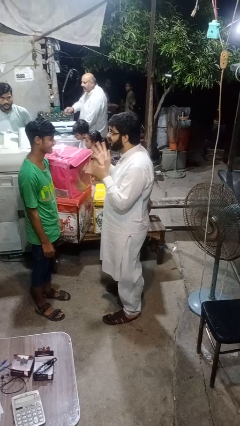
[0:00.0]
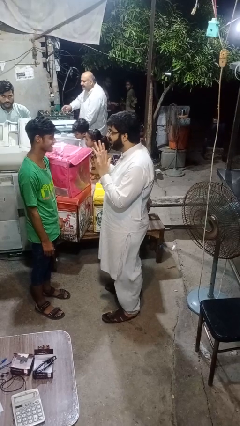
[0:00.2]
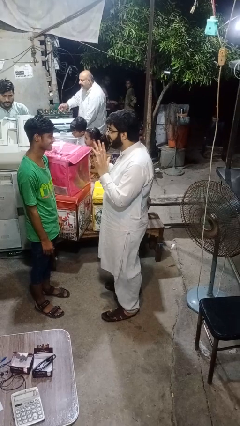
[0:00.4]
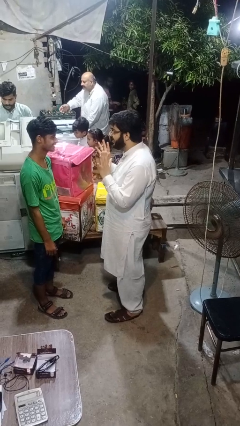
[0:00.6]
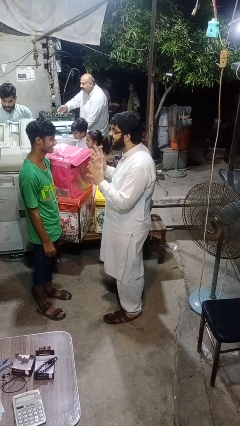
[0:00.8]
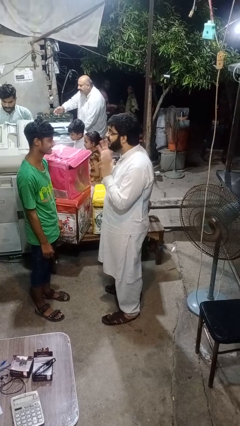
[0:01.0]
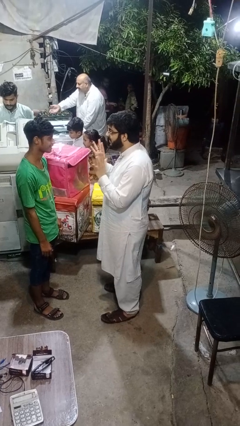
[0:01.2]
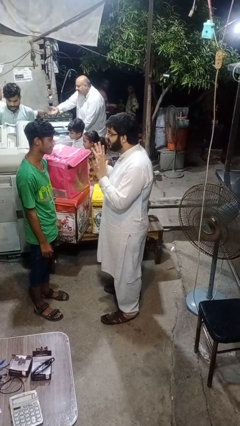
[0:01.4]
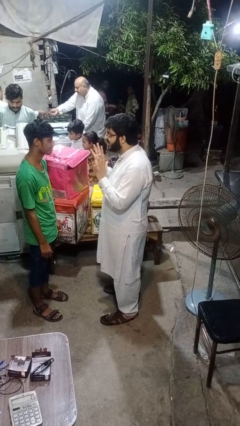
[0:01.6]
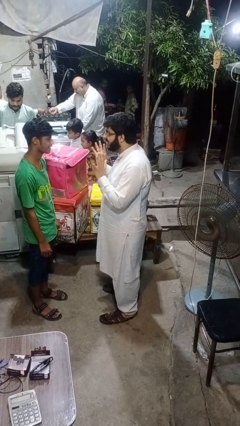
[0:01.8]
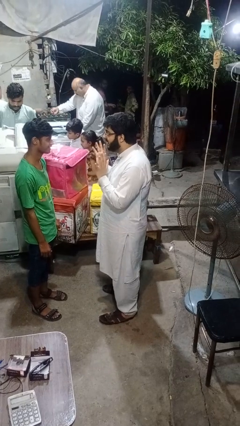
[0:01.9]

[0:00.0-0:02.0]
person talks to person

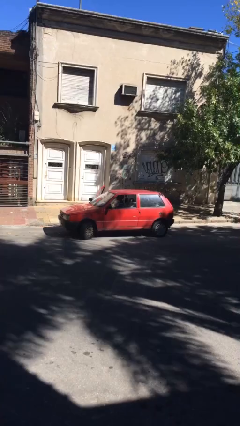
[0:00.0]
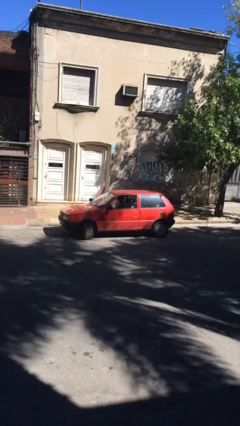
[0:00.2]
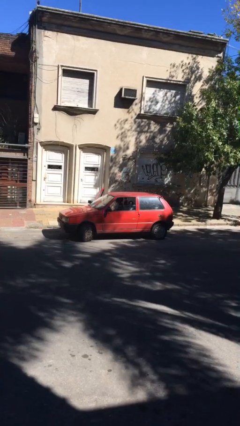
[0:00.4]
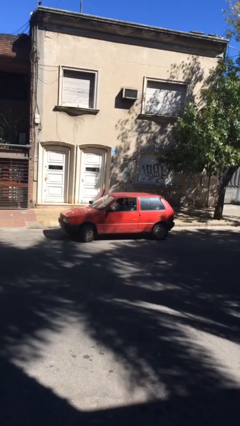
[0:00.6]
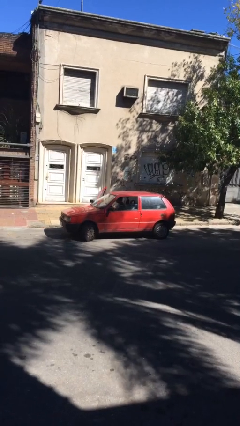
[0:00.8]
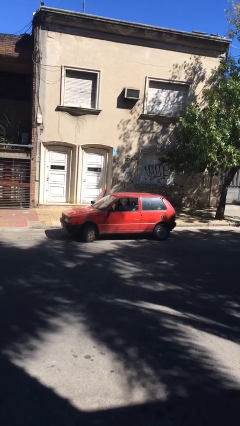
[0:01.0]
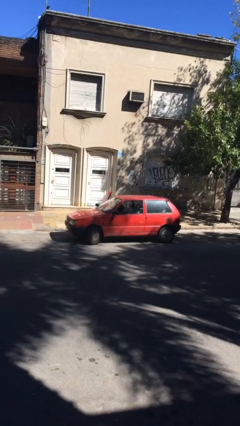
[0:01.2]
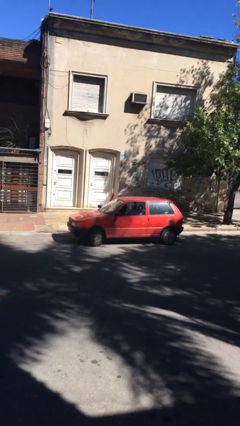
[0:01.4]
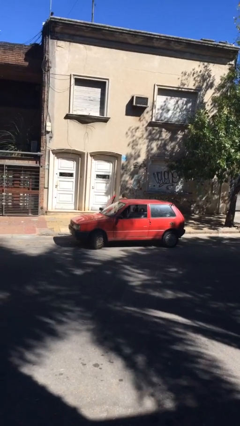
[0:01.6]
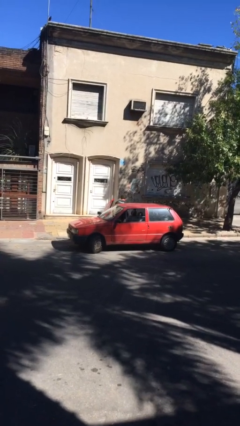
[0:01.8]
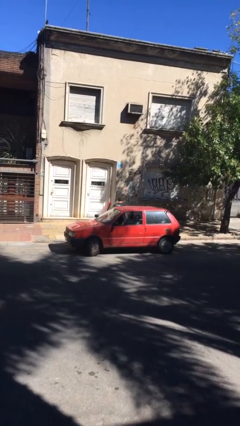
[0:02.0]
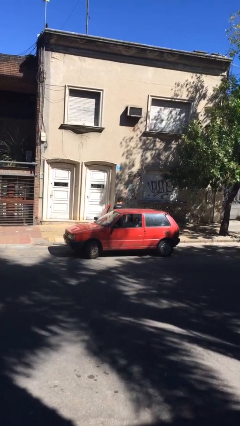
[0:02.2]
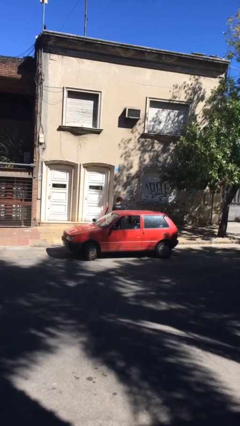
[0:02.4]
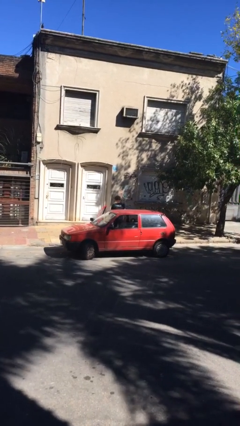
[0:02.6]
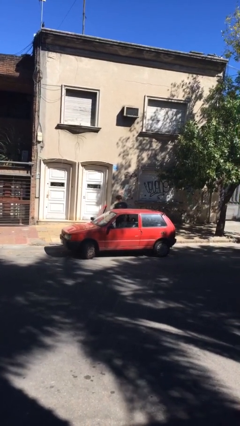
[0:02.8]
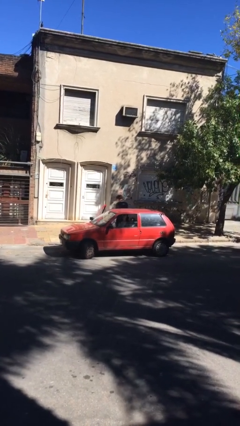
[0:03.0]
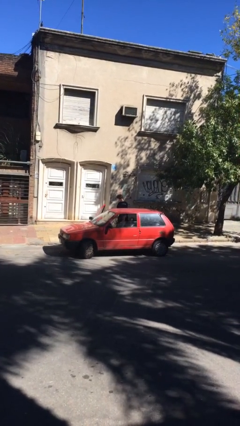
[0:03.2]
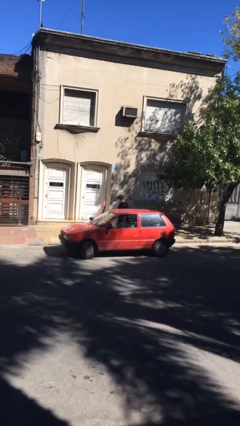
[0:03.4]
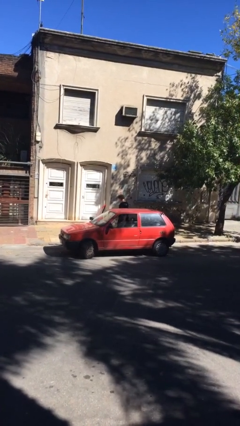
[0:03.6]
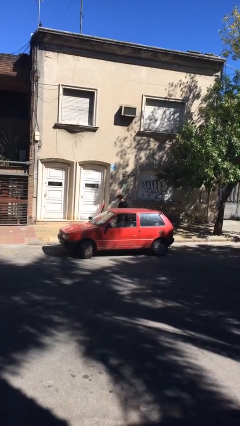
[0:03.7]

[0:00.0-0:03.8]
person exits car

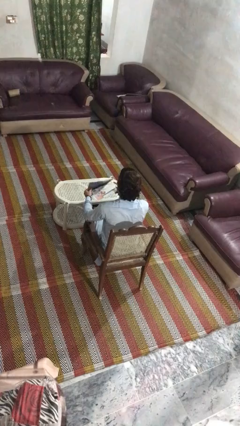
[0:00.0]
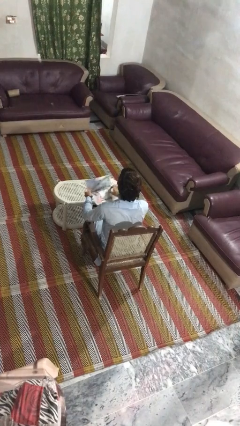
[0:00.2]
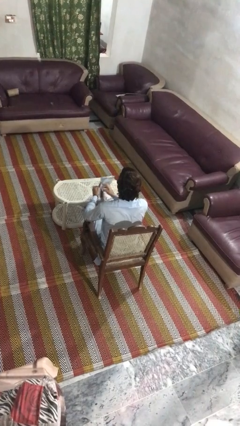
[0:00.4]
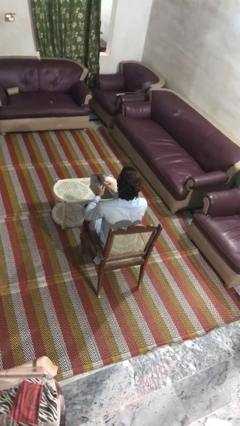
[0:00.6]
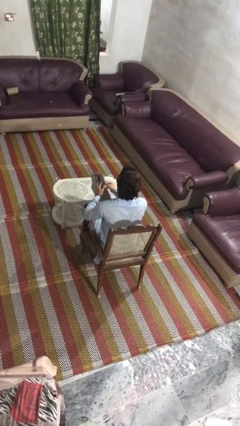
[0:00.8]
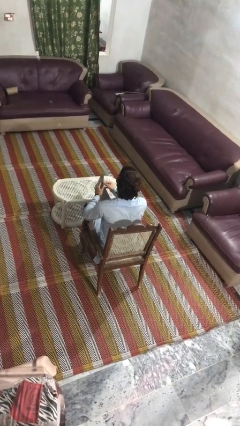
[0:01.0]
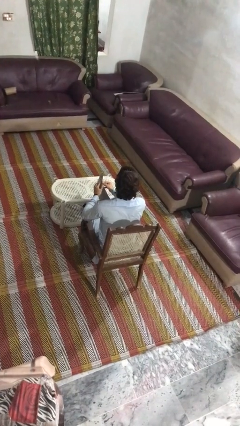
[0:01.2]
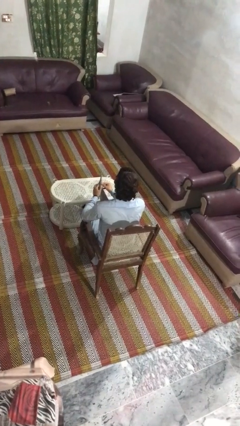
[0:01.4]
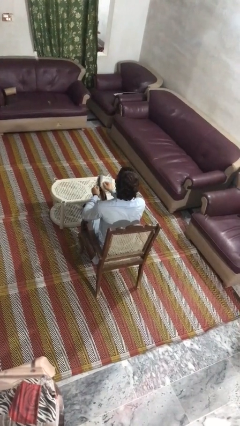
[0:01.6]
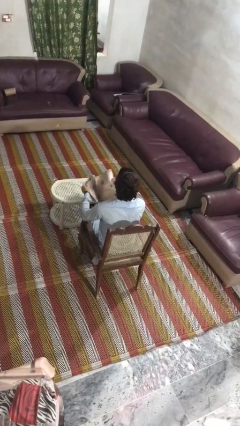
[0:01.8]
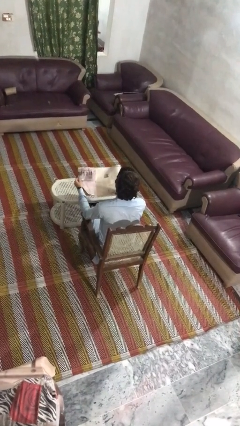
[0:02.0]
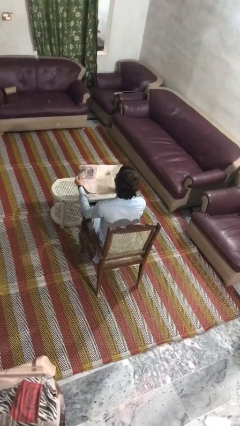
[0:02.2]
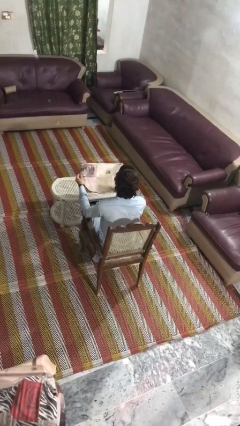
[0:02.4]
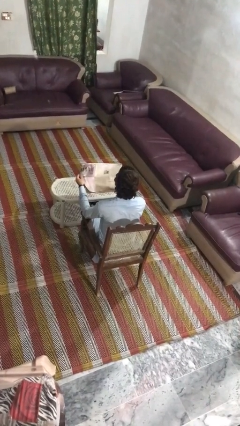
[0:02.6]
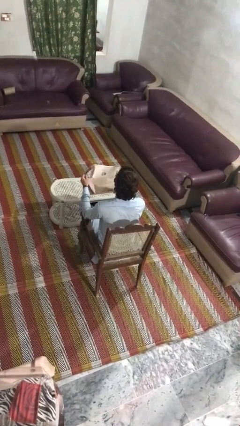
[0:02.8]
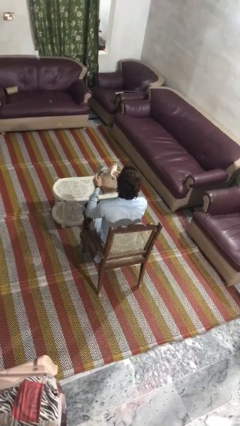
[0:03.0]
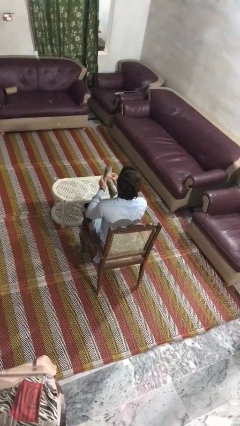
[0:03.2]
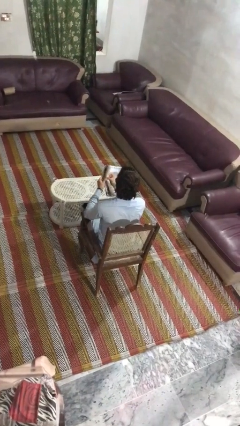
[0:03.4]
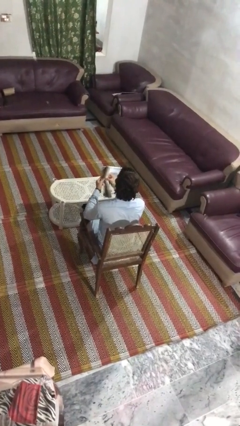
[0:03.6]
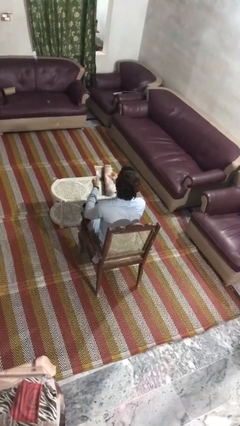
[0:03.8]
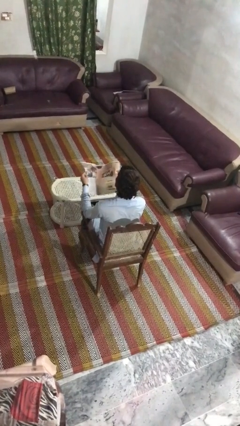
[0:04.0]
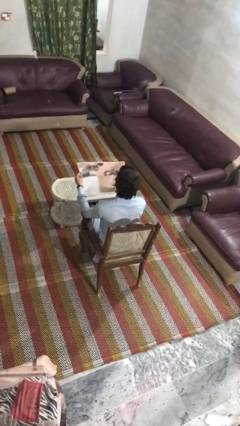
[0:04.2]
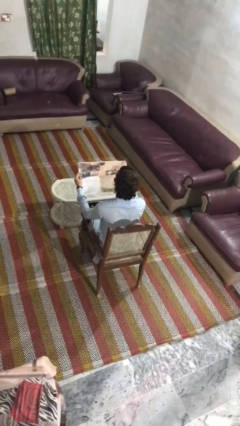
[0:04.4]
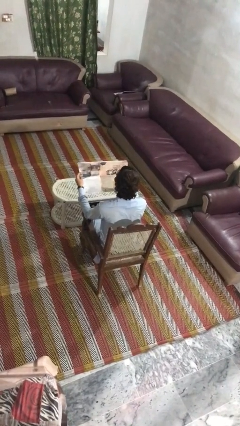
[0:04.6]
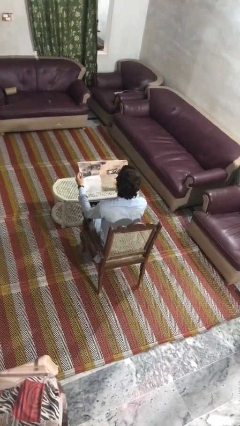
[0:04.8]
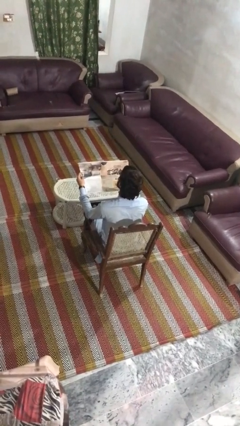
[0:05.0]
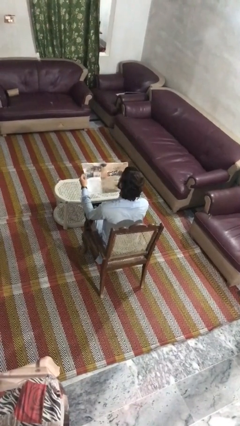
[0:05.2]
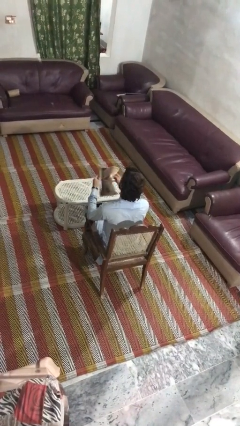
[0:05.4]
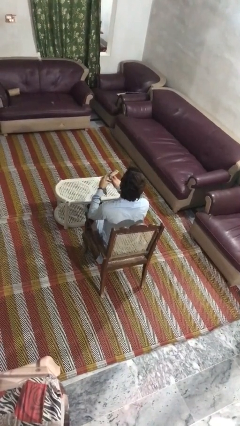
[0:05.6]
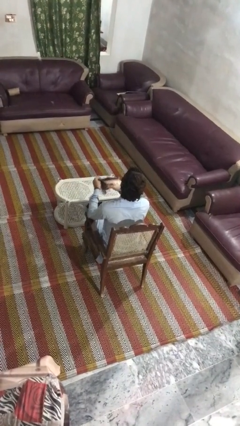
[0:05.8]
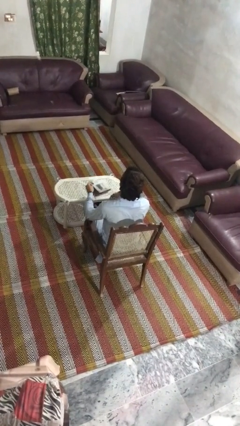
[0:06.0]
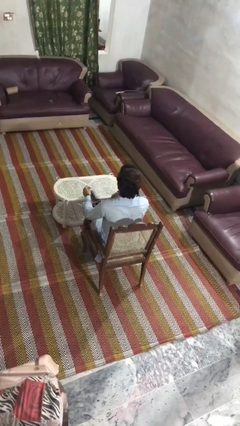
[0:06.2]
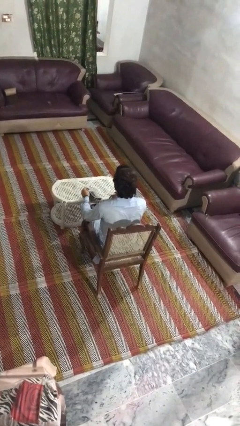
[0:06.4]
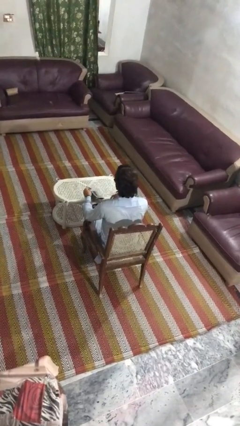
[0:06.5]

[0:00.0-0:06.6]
person reads magazine

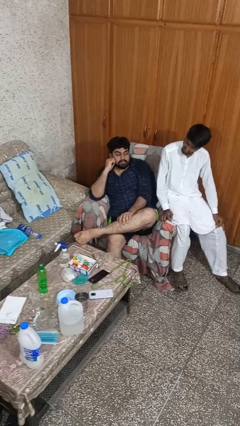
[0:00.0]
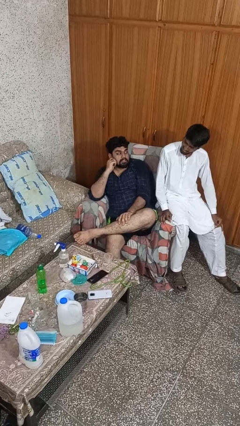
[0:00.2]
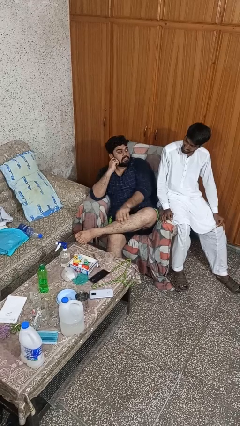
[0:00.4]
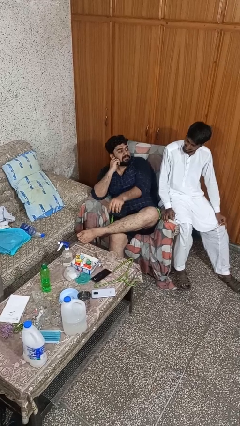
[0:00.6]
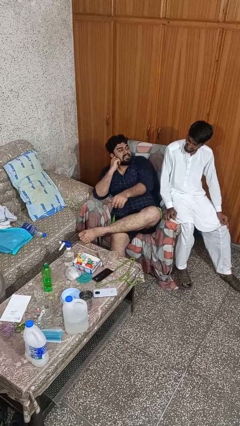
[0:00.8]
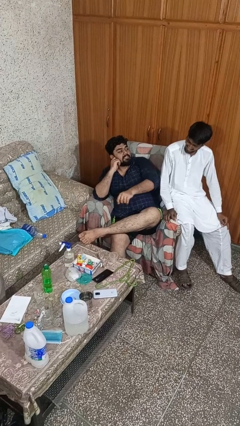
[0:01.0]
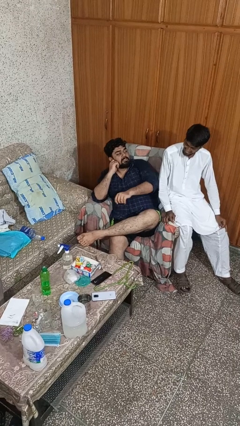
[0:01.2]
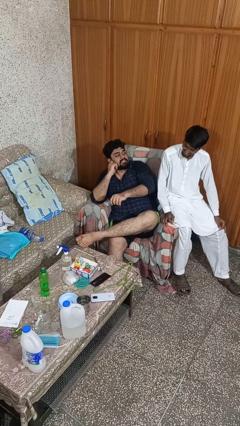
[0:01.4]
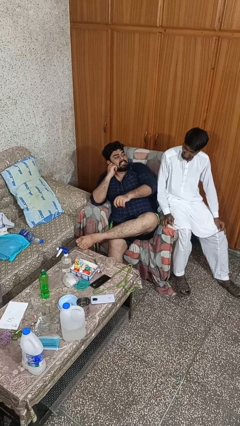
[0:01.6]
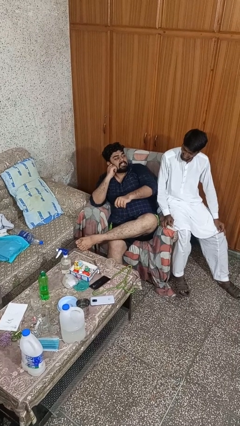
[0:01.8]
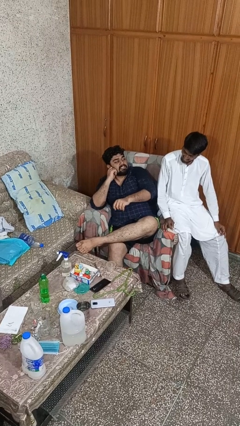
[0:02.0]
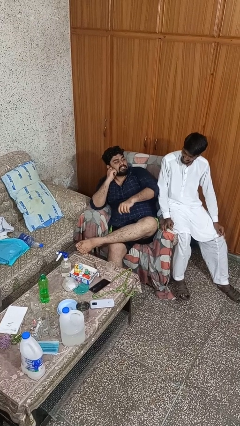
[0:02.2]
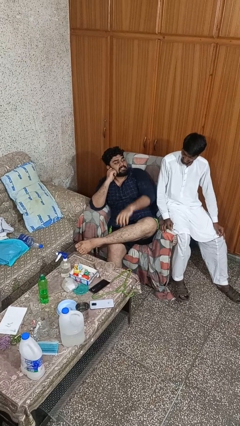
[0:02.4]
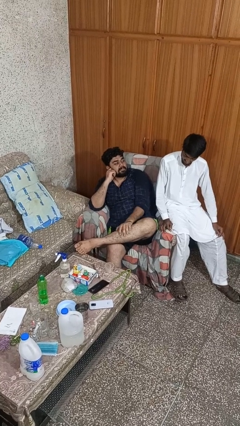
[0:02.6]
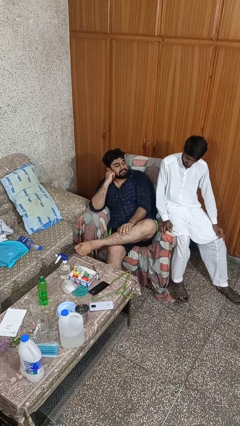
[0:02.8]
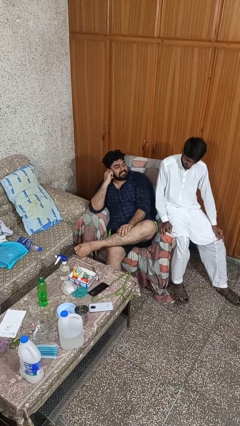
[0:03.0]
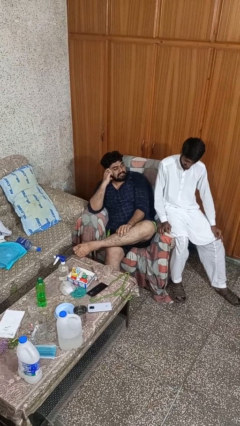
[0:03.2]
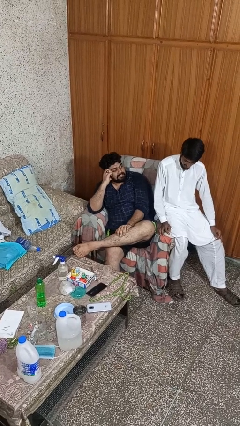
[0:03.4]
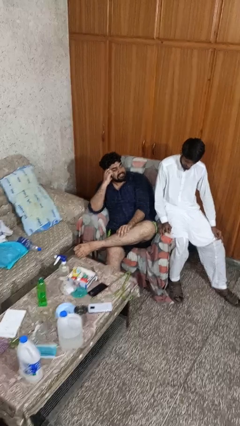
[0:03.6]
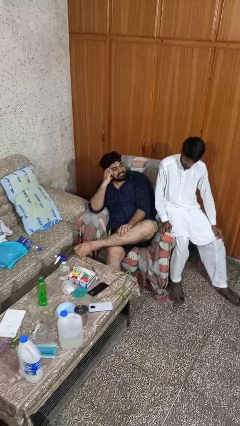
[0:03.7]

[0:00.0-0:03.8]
person nudges person with elbow

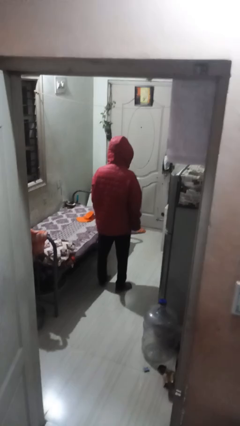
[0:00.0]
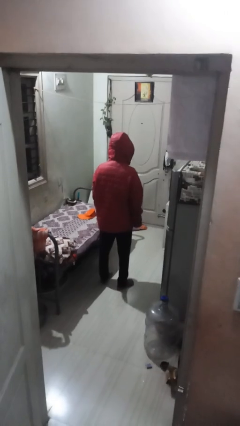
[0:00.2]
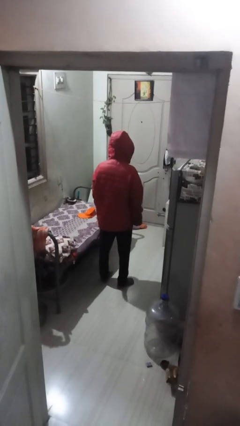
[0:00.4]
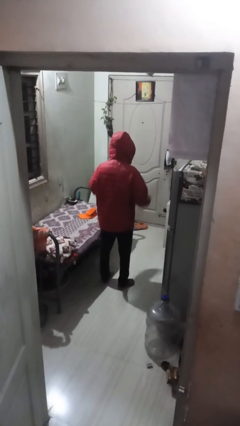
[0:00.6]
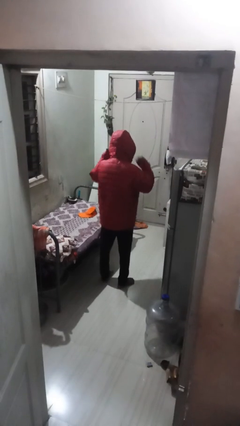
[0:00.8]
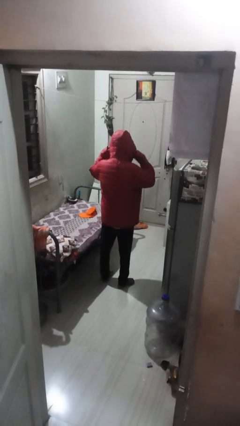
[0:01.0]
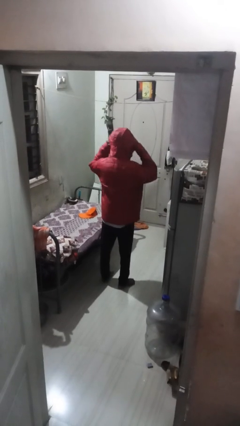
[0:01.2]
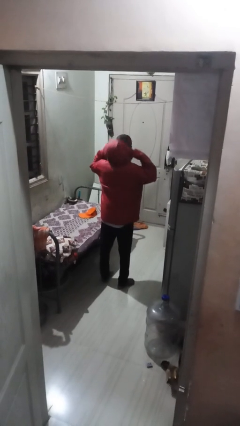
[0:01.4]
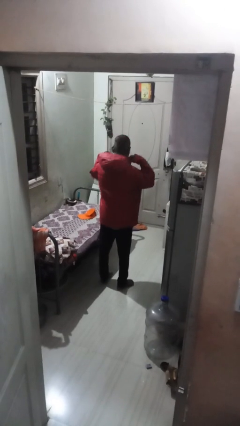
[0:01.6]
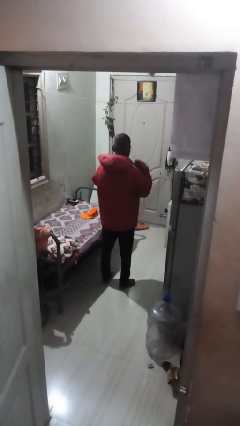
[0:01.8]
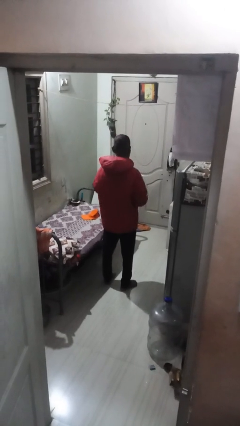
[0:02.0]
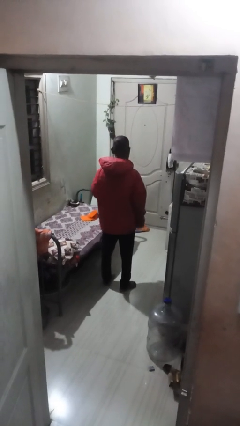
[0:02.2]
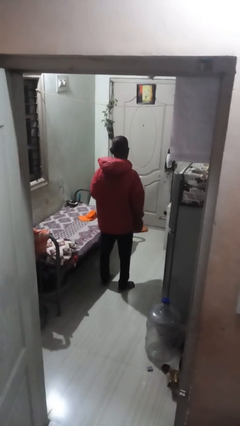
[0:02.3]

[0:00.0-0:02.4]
person takes off hoodie
